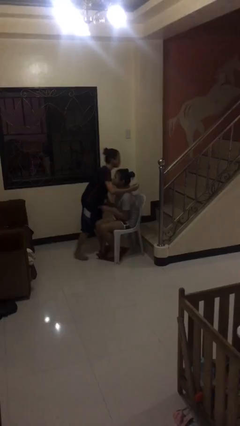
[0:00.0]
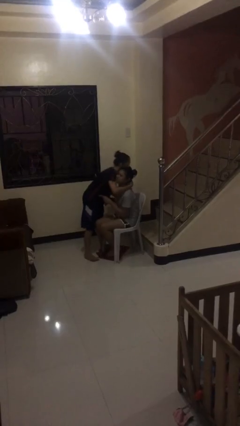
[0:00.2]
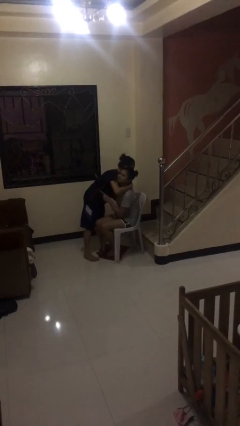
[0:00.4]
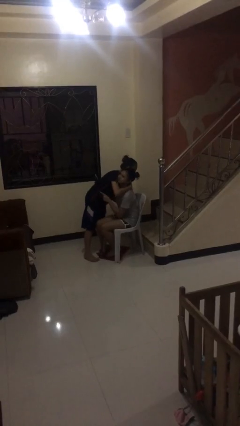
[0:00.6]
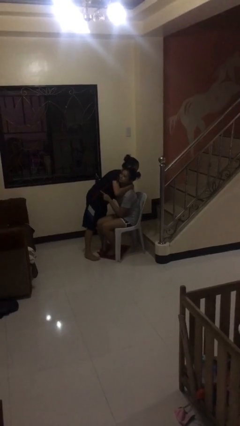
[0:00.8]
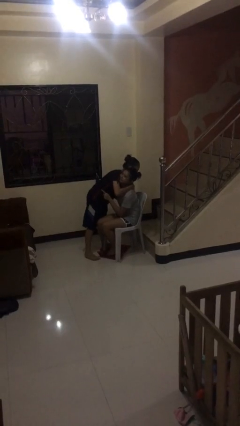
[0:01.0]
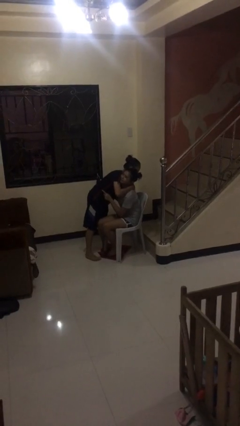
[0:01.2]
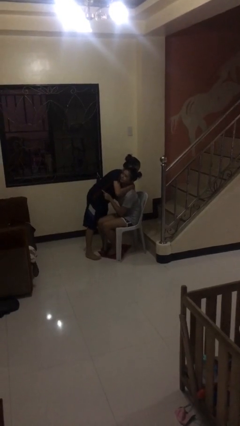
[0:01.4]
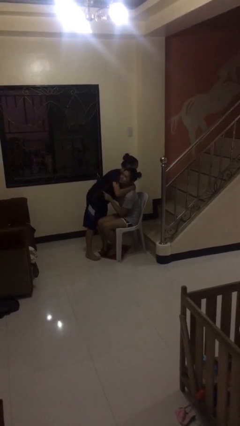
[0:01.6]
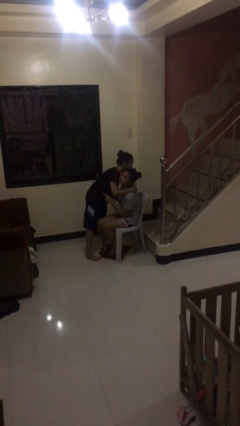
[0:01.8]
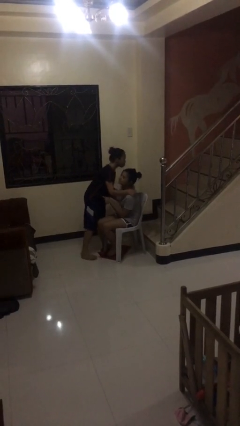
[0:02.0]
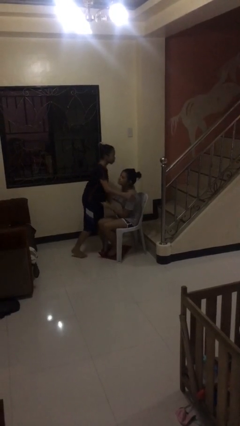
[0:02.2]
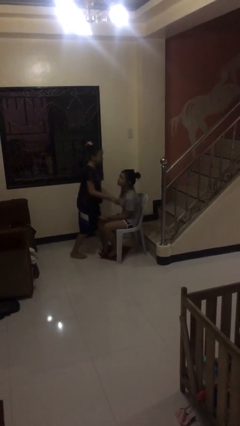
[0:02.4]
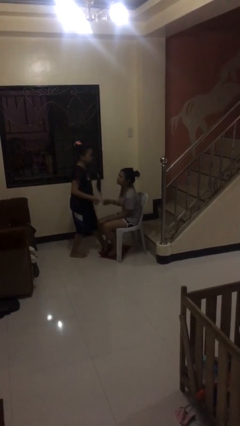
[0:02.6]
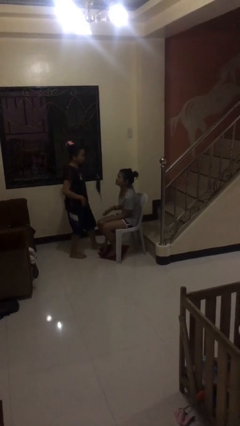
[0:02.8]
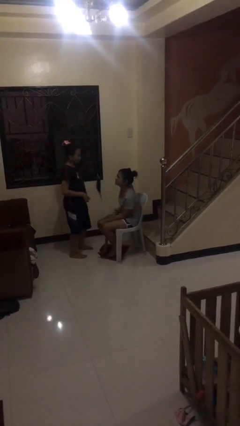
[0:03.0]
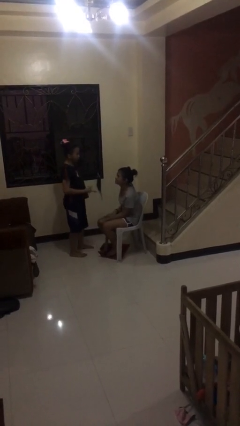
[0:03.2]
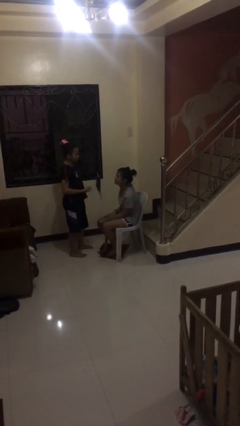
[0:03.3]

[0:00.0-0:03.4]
person embraces person

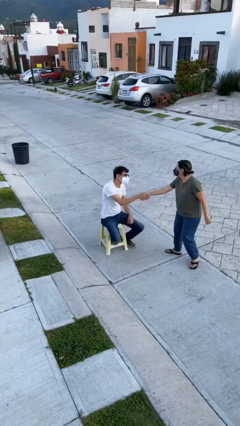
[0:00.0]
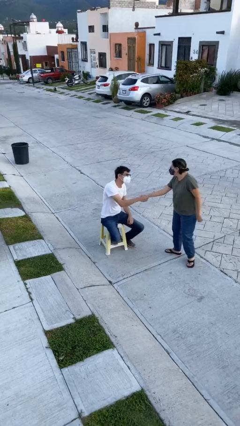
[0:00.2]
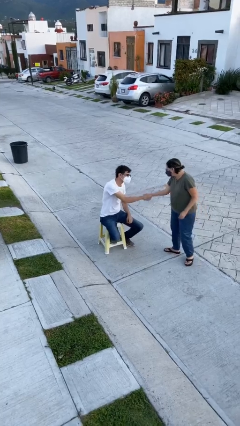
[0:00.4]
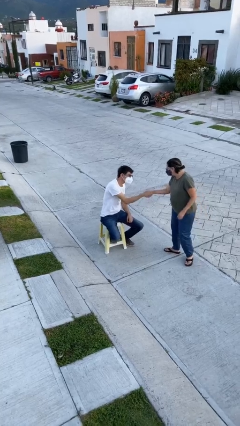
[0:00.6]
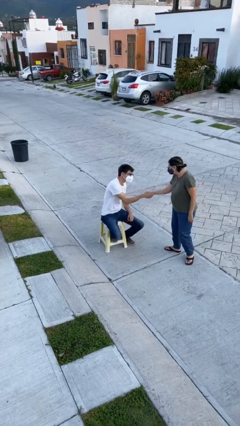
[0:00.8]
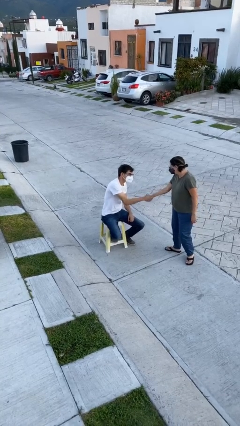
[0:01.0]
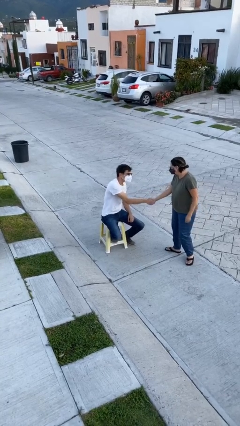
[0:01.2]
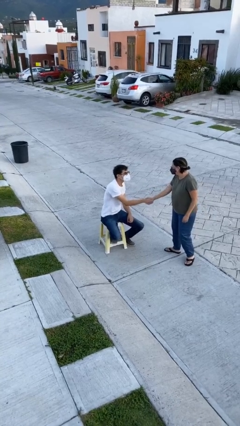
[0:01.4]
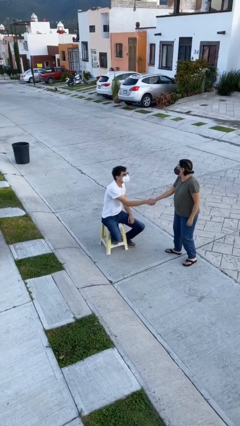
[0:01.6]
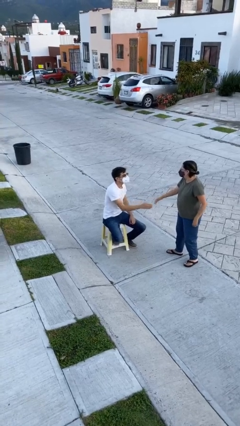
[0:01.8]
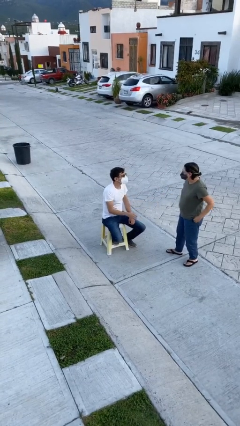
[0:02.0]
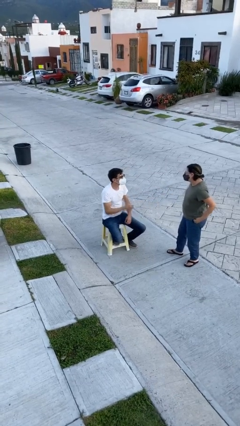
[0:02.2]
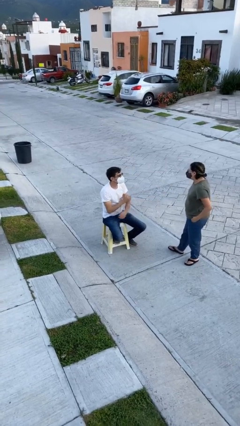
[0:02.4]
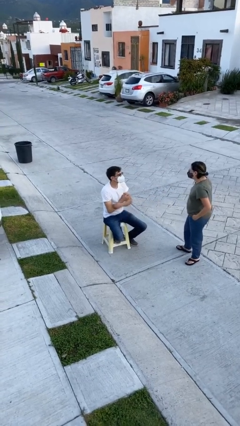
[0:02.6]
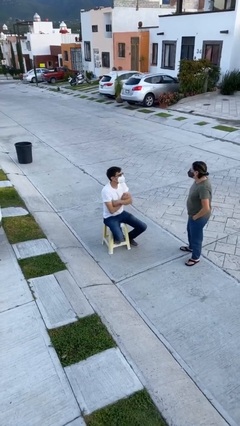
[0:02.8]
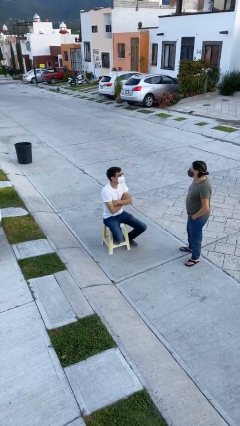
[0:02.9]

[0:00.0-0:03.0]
person shakes hand

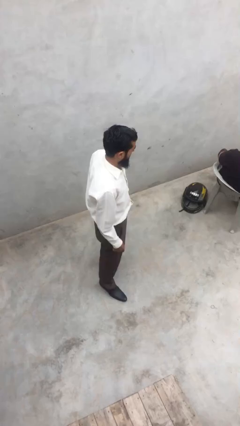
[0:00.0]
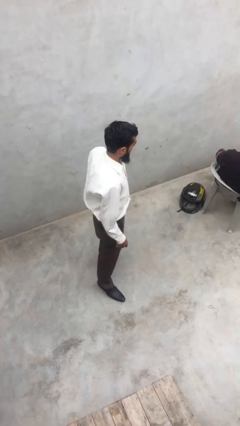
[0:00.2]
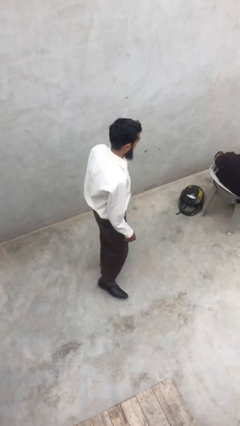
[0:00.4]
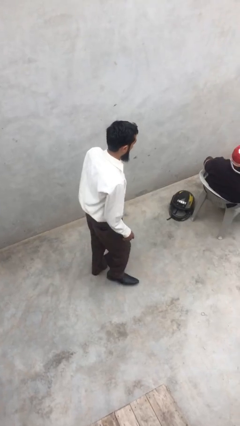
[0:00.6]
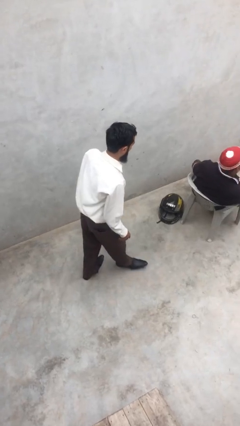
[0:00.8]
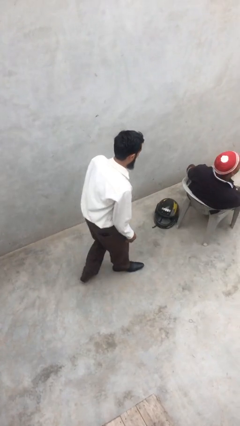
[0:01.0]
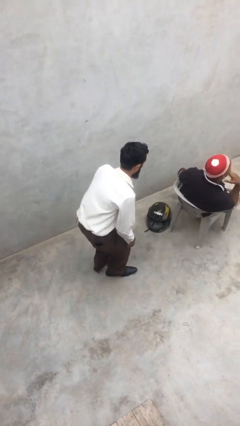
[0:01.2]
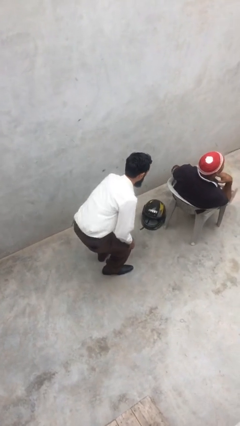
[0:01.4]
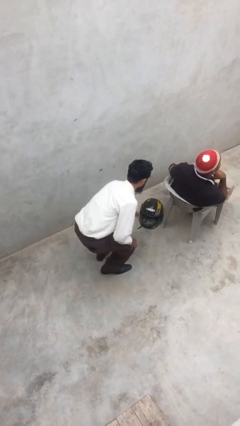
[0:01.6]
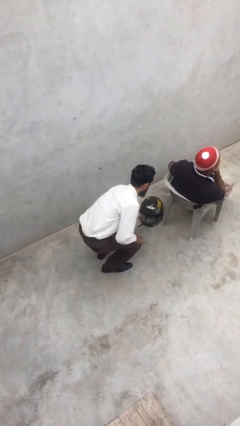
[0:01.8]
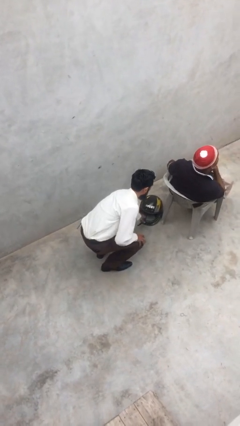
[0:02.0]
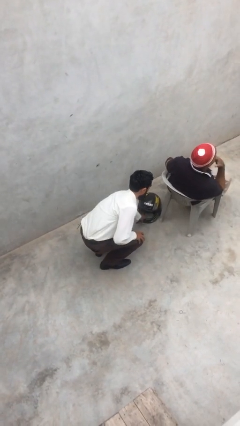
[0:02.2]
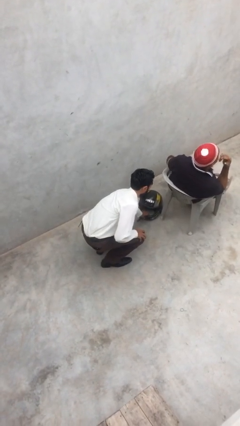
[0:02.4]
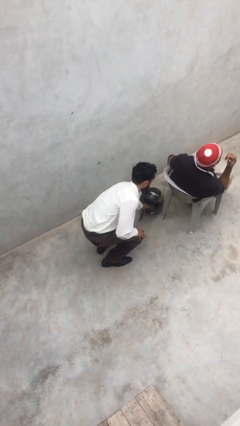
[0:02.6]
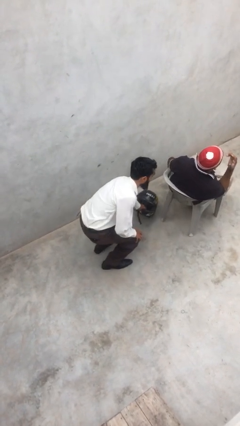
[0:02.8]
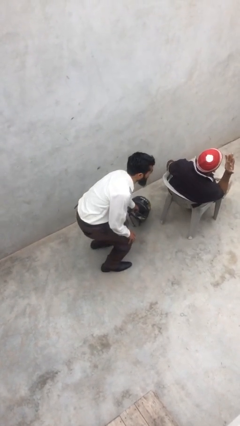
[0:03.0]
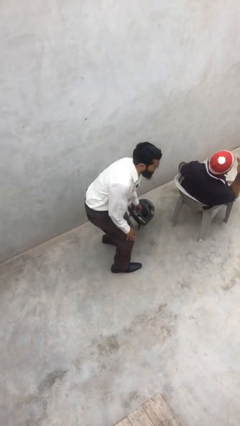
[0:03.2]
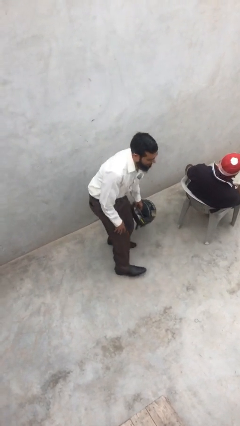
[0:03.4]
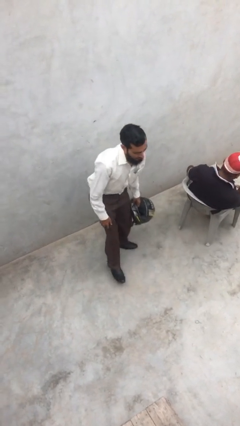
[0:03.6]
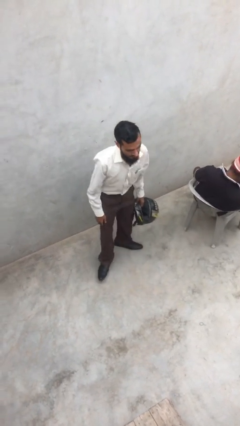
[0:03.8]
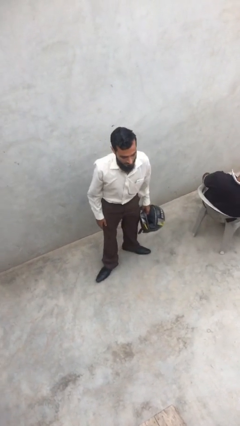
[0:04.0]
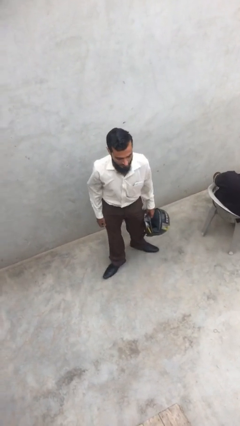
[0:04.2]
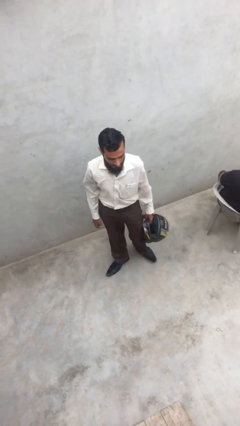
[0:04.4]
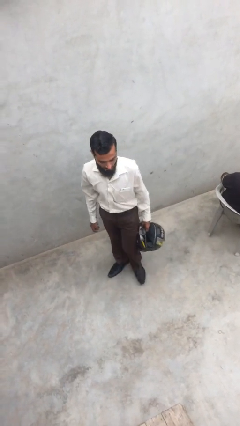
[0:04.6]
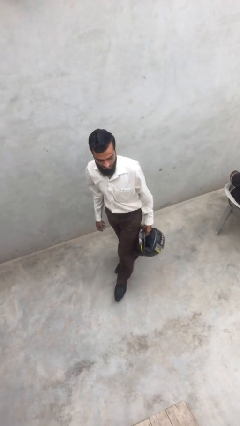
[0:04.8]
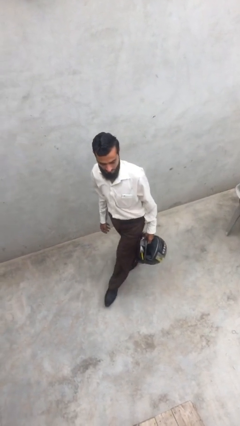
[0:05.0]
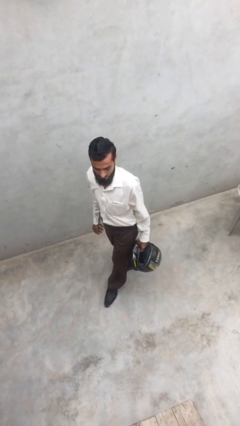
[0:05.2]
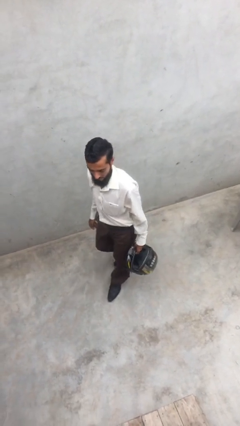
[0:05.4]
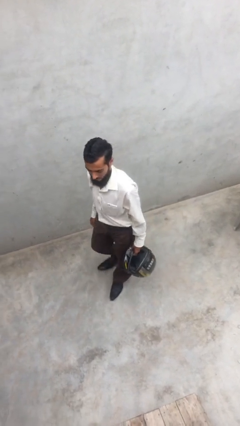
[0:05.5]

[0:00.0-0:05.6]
person steals object from person

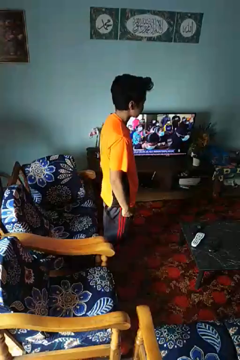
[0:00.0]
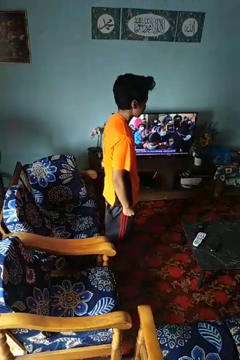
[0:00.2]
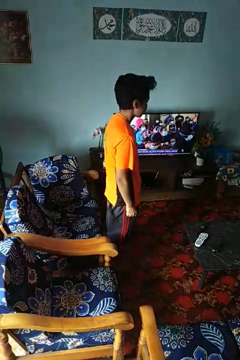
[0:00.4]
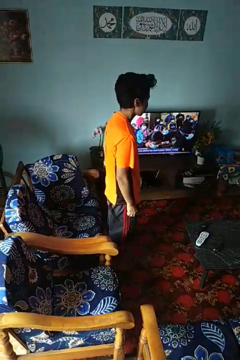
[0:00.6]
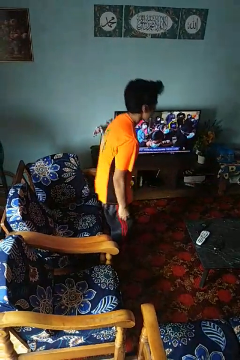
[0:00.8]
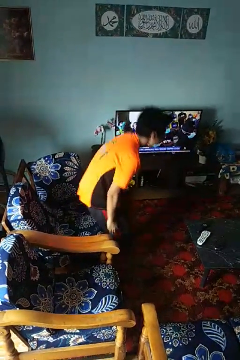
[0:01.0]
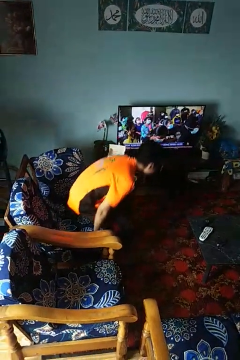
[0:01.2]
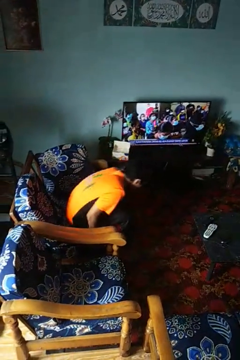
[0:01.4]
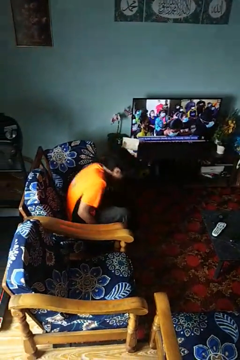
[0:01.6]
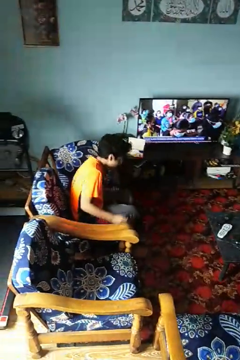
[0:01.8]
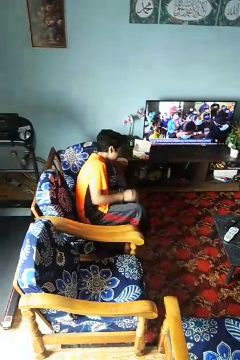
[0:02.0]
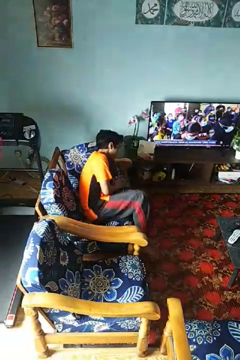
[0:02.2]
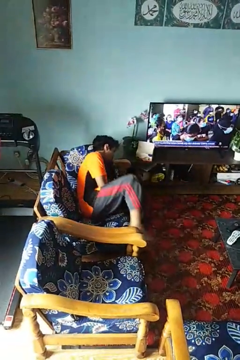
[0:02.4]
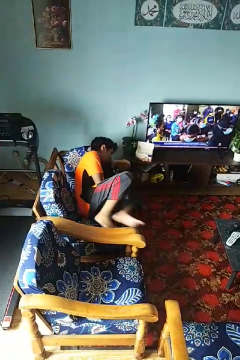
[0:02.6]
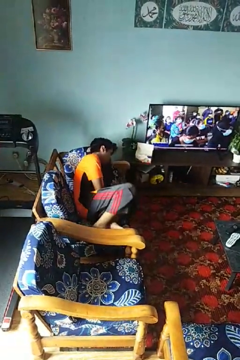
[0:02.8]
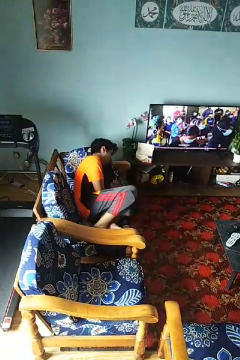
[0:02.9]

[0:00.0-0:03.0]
person lies down on couch

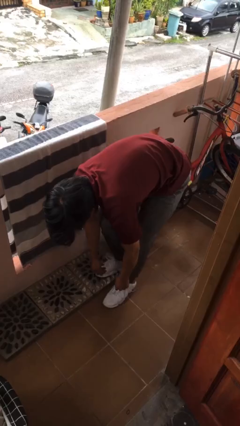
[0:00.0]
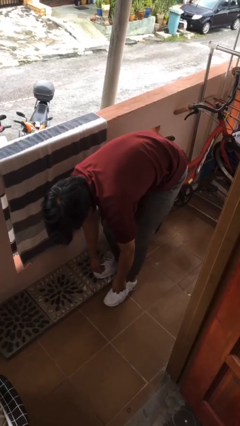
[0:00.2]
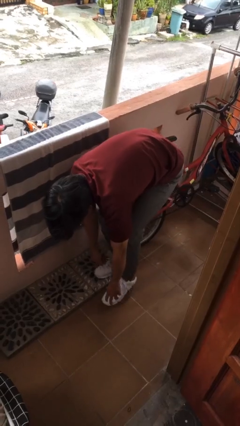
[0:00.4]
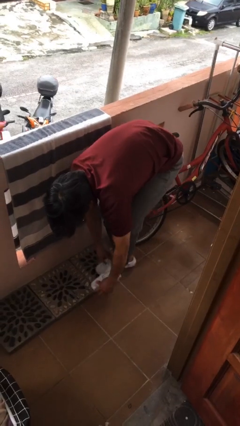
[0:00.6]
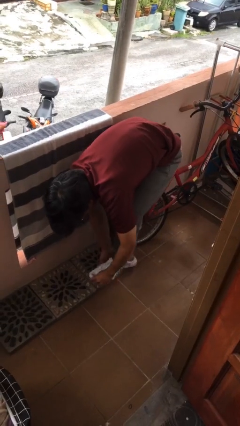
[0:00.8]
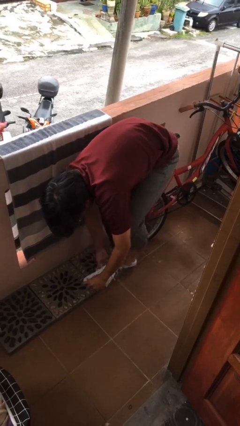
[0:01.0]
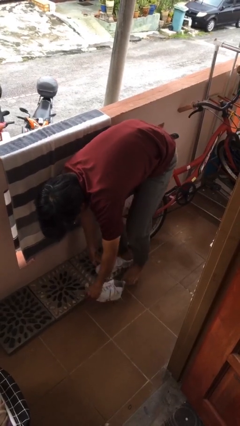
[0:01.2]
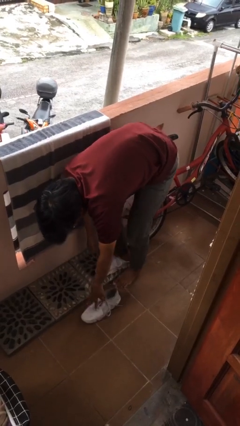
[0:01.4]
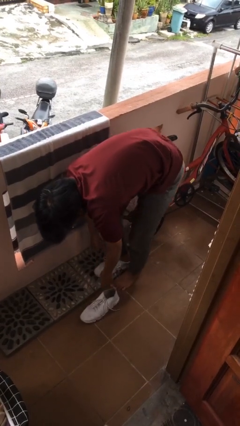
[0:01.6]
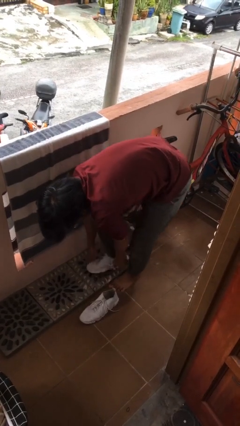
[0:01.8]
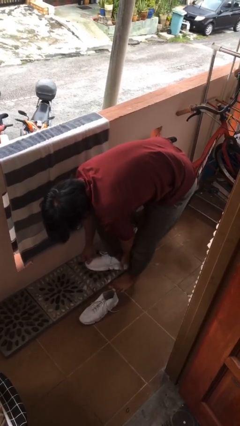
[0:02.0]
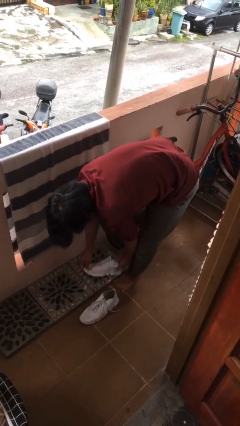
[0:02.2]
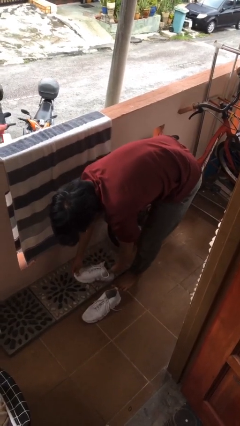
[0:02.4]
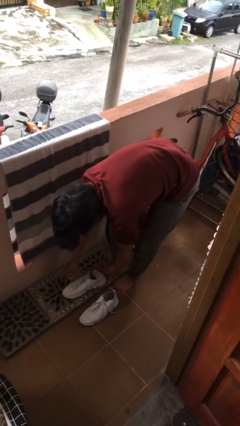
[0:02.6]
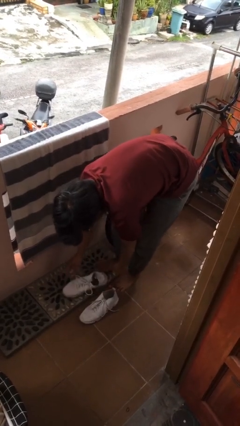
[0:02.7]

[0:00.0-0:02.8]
person takes off shoes

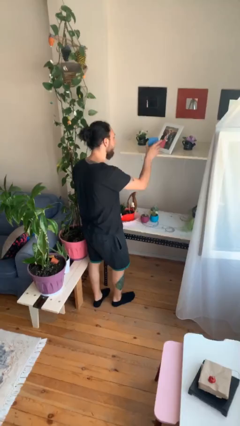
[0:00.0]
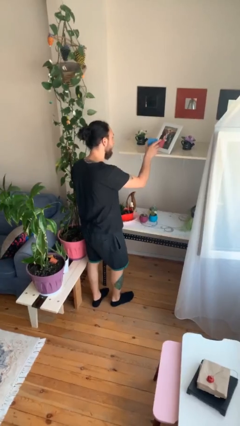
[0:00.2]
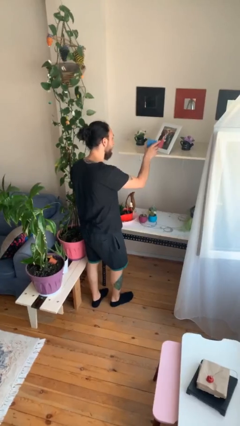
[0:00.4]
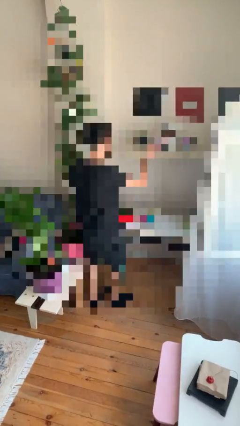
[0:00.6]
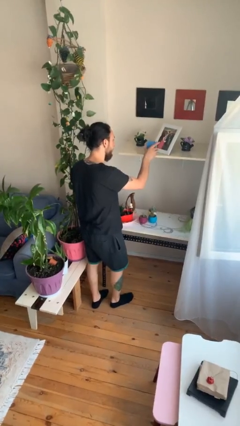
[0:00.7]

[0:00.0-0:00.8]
person puts down object on shelf
